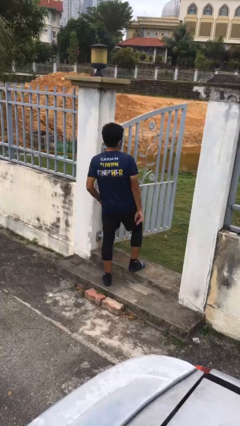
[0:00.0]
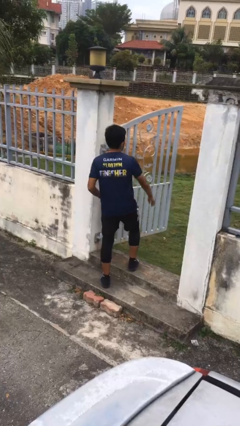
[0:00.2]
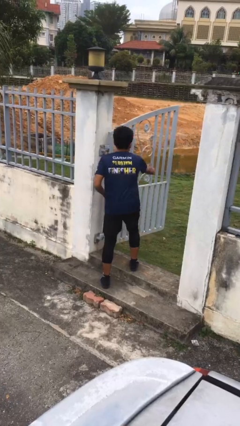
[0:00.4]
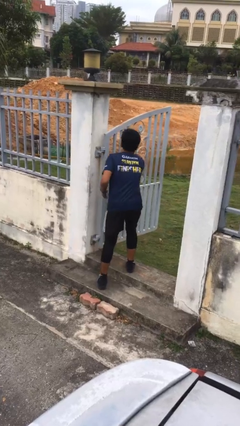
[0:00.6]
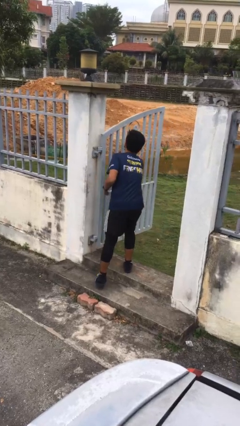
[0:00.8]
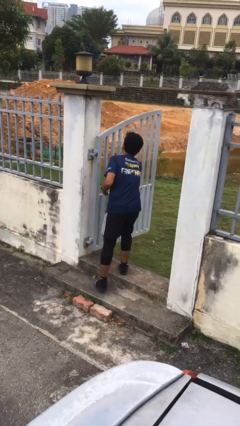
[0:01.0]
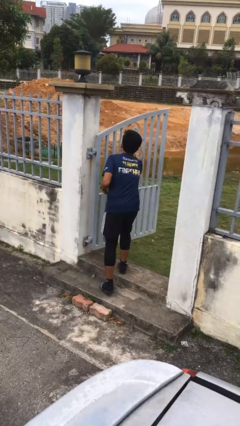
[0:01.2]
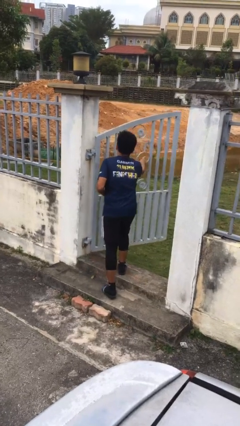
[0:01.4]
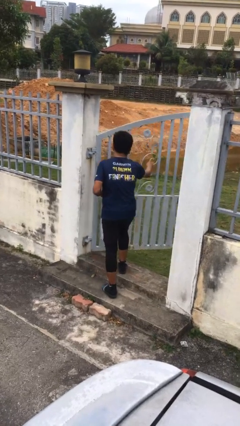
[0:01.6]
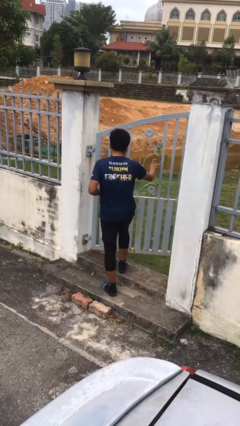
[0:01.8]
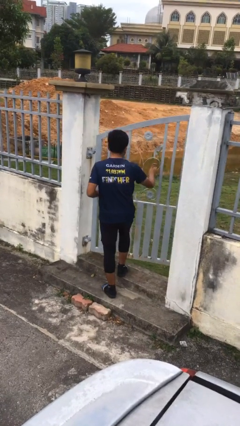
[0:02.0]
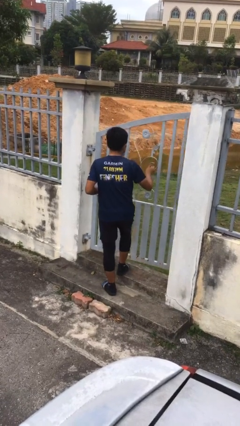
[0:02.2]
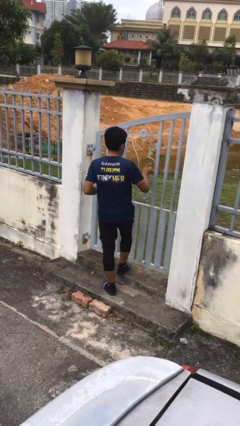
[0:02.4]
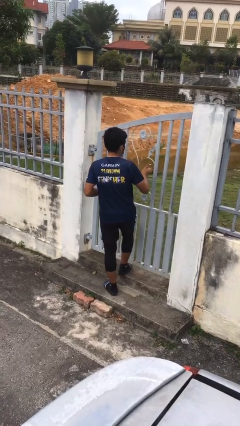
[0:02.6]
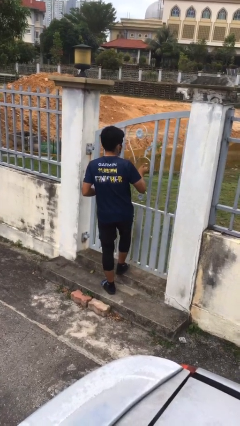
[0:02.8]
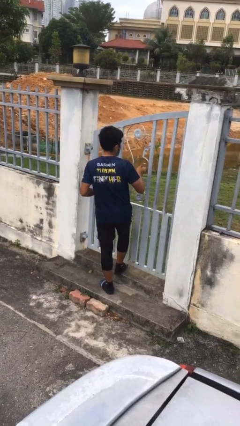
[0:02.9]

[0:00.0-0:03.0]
person closes facility door

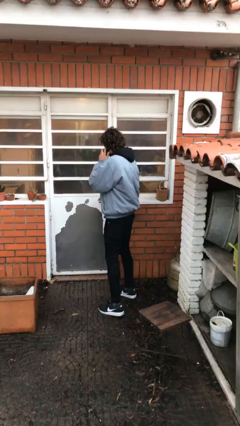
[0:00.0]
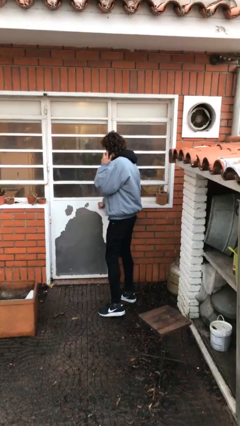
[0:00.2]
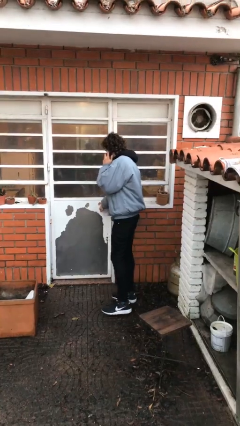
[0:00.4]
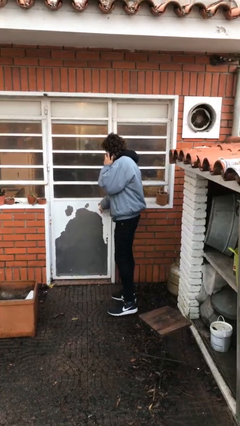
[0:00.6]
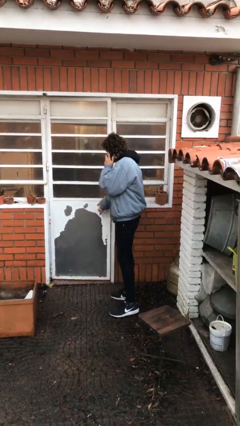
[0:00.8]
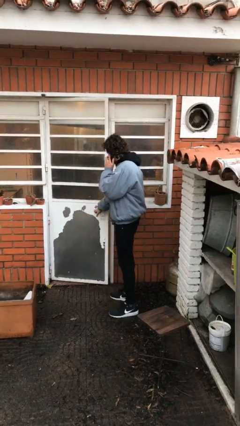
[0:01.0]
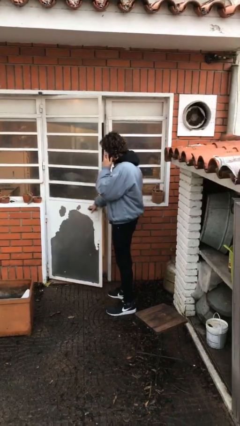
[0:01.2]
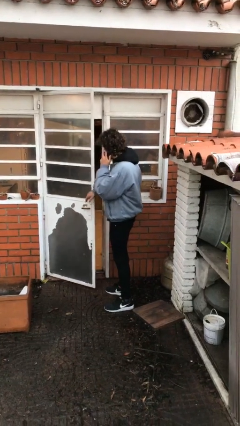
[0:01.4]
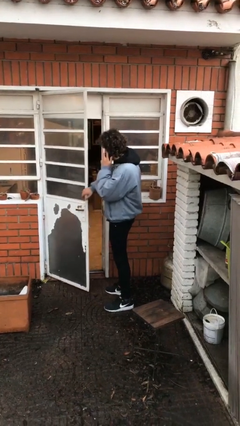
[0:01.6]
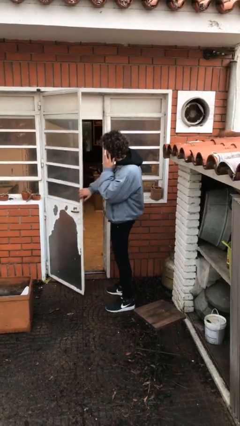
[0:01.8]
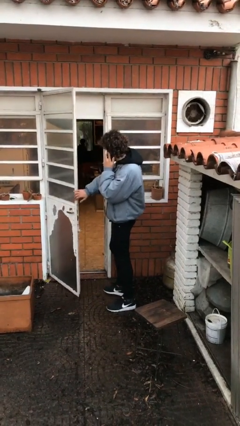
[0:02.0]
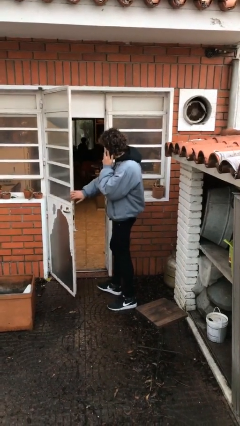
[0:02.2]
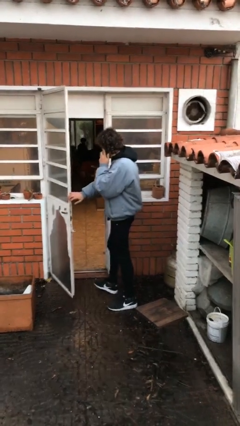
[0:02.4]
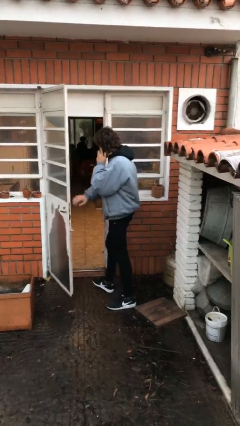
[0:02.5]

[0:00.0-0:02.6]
person opens facility door

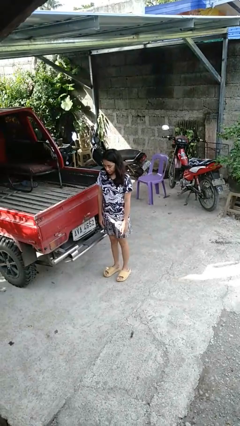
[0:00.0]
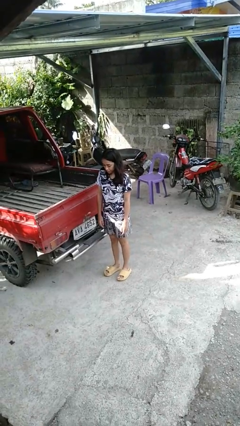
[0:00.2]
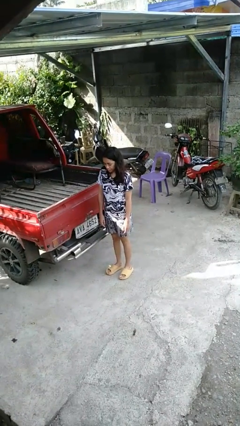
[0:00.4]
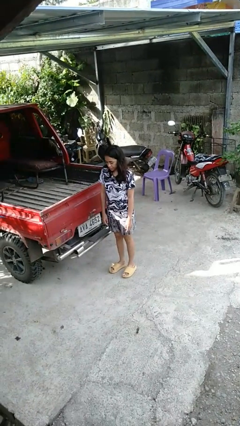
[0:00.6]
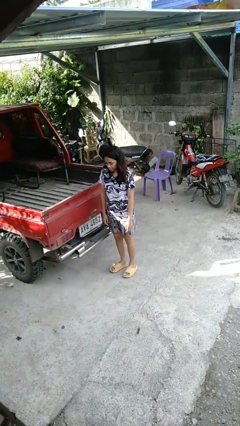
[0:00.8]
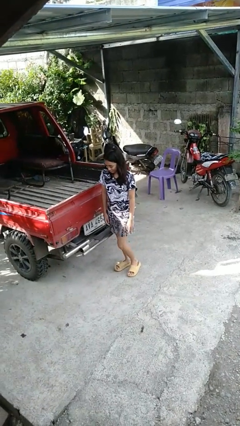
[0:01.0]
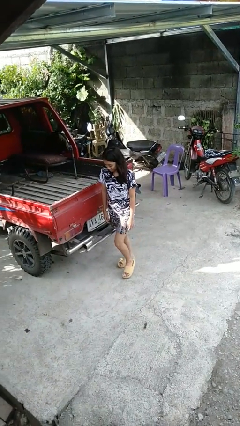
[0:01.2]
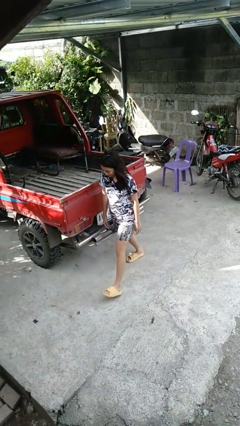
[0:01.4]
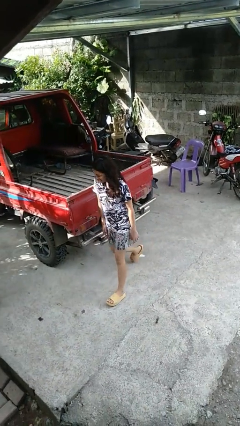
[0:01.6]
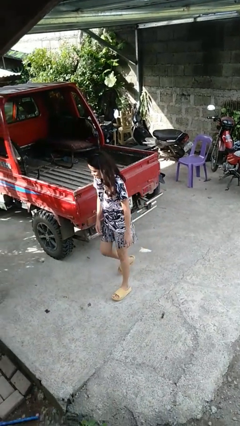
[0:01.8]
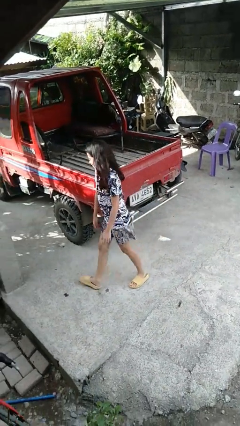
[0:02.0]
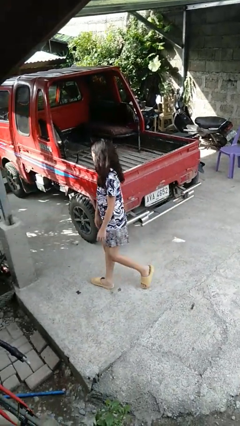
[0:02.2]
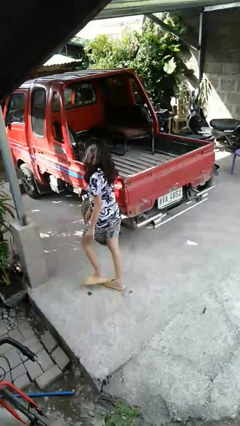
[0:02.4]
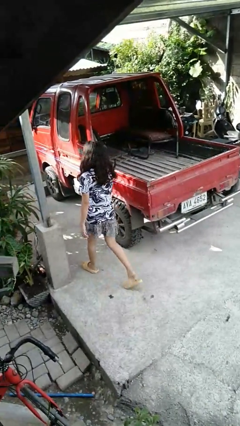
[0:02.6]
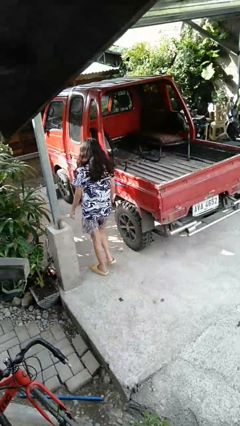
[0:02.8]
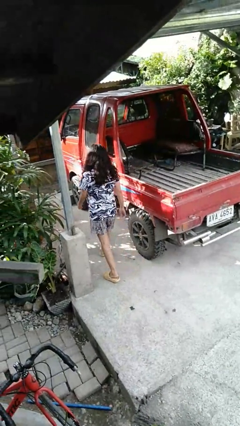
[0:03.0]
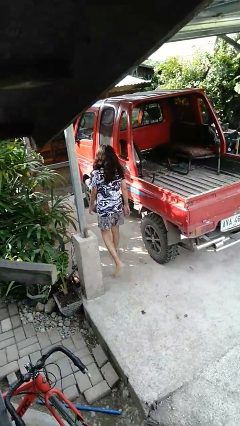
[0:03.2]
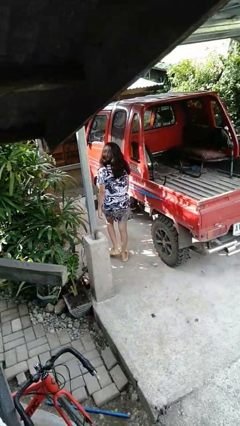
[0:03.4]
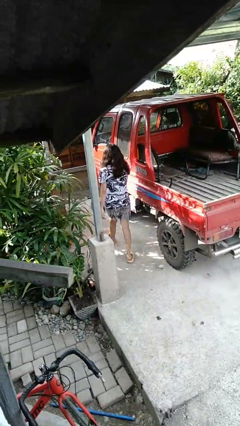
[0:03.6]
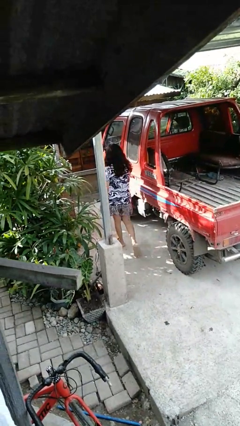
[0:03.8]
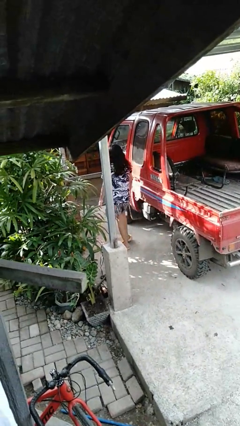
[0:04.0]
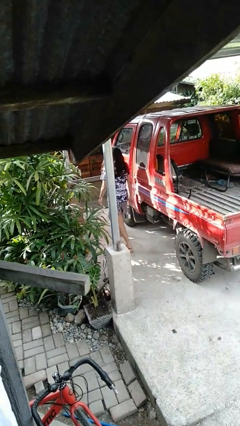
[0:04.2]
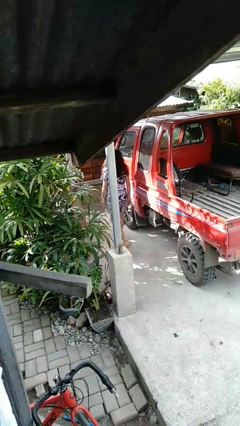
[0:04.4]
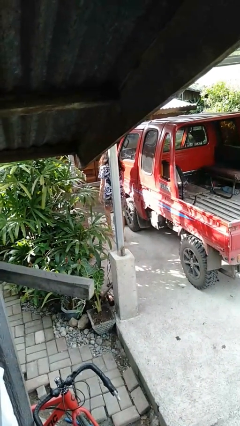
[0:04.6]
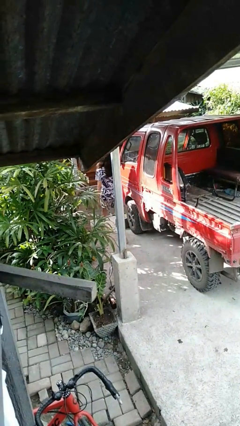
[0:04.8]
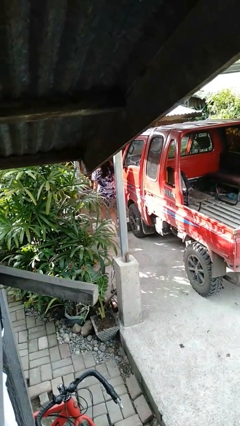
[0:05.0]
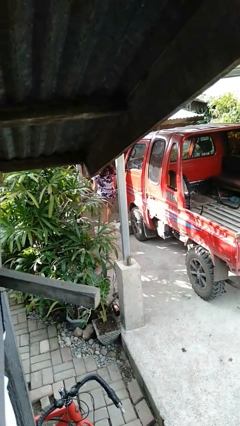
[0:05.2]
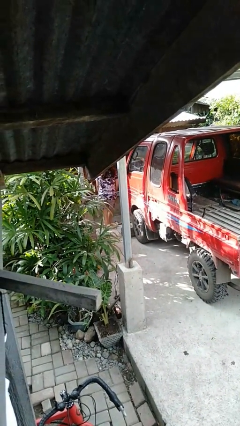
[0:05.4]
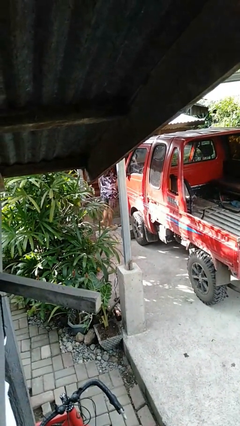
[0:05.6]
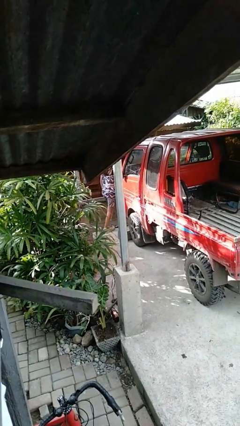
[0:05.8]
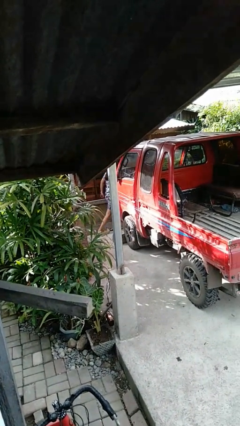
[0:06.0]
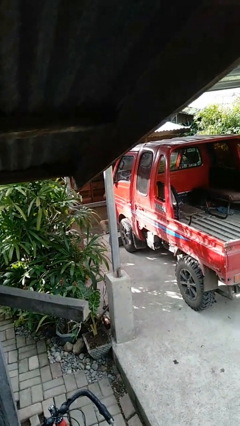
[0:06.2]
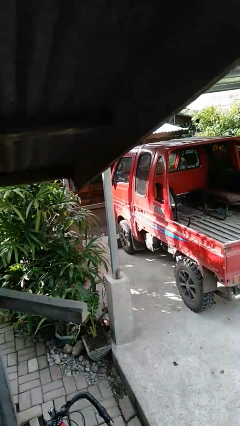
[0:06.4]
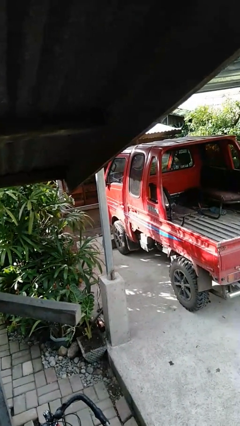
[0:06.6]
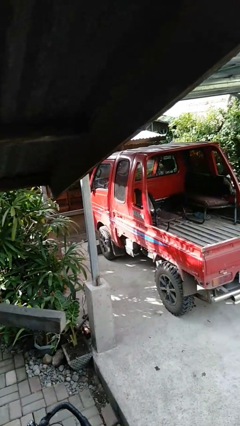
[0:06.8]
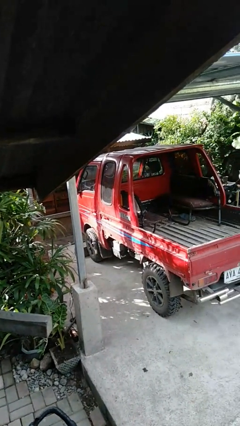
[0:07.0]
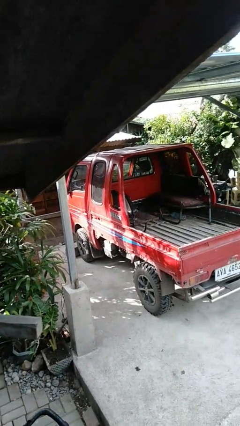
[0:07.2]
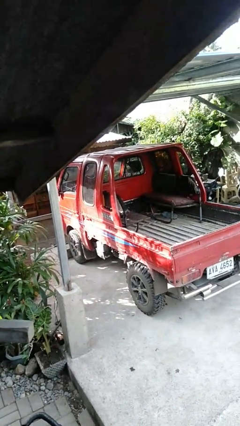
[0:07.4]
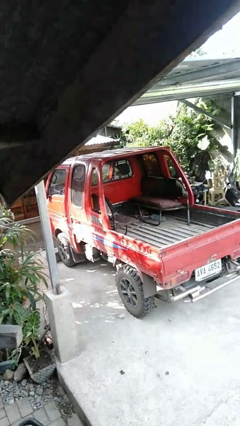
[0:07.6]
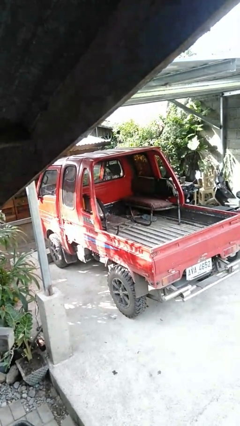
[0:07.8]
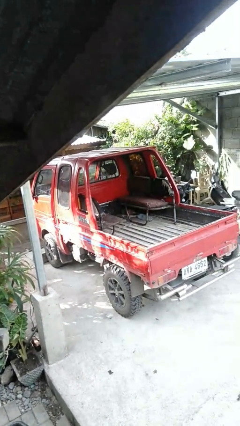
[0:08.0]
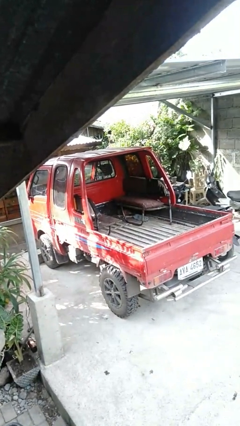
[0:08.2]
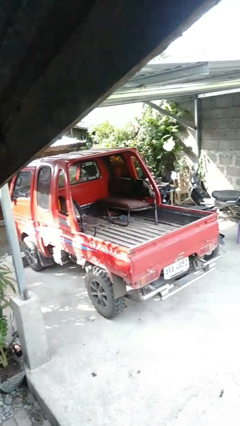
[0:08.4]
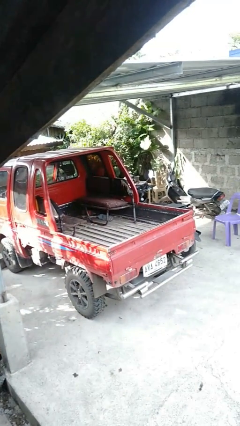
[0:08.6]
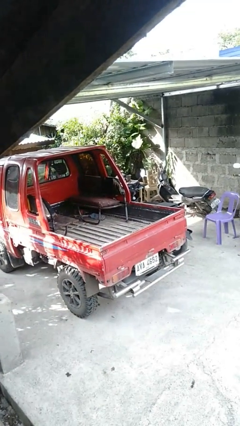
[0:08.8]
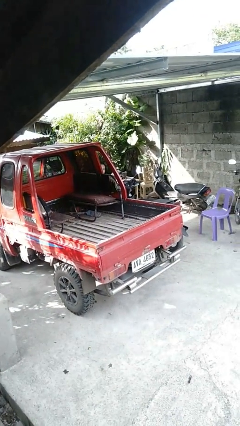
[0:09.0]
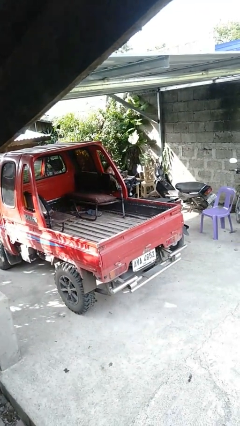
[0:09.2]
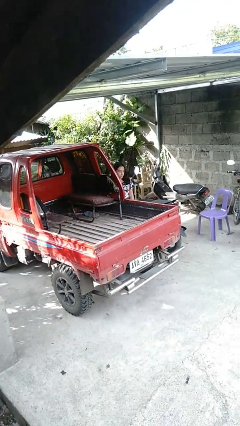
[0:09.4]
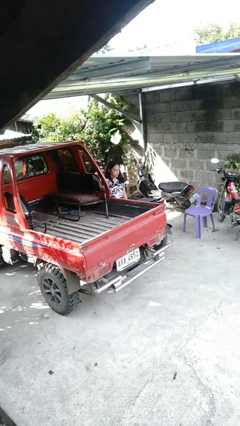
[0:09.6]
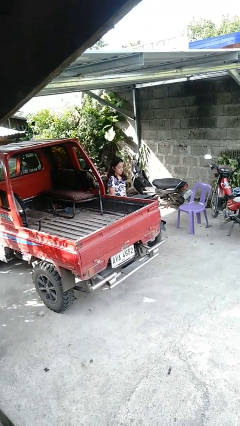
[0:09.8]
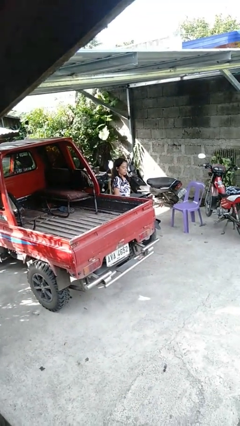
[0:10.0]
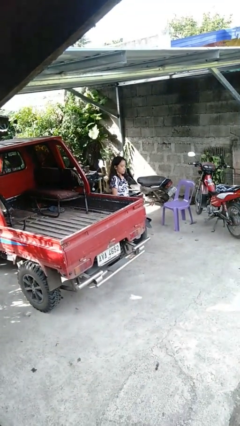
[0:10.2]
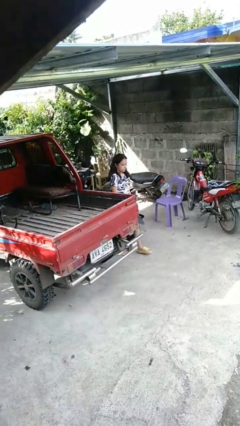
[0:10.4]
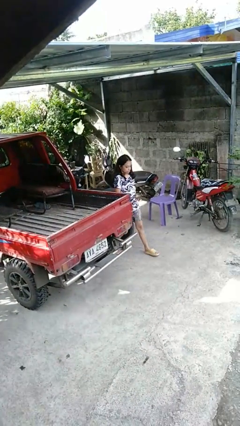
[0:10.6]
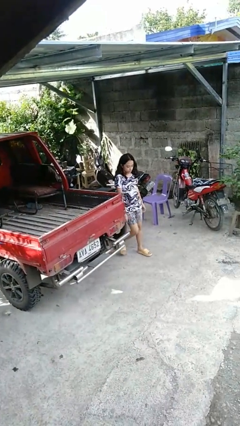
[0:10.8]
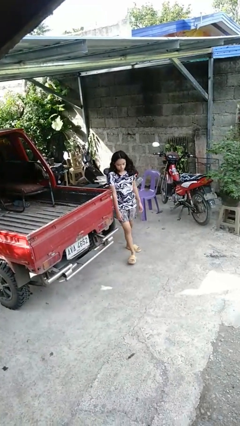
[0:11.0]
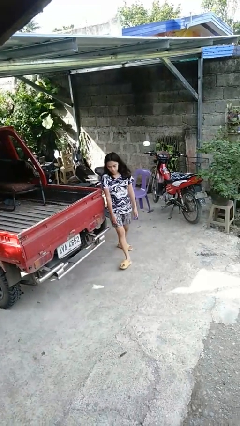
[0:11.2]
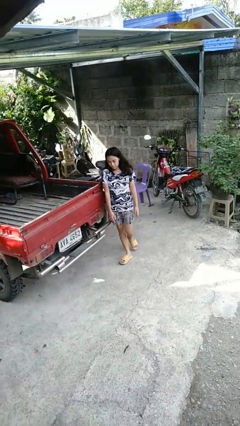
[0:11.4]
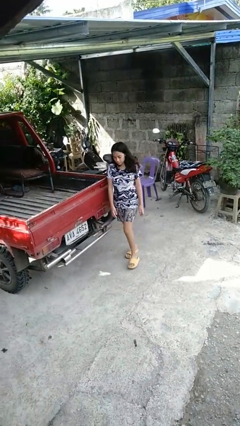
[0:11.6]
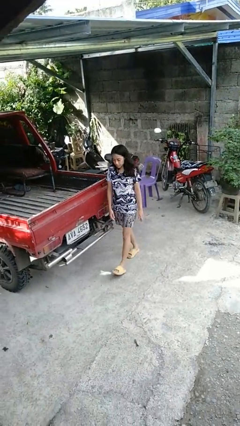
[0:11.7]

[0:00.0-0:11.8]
person walks around car
